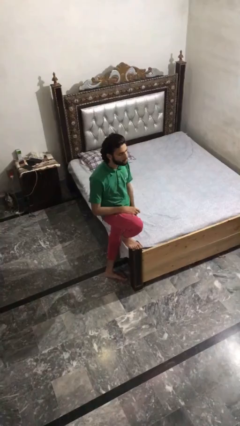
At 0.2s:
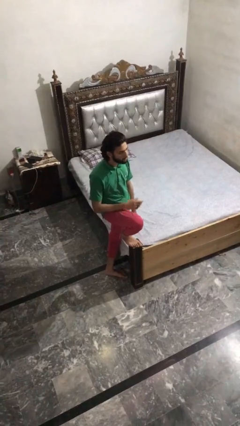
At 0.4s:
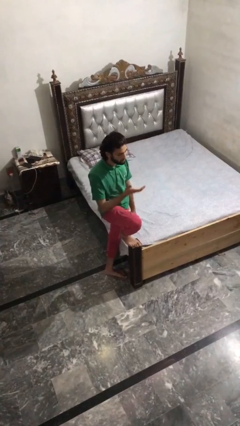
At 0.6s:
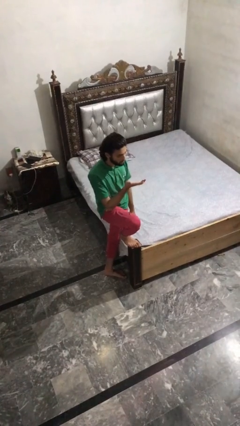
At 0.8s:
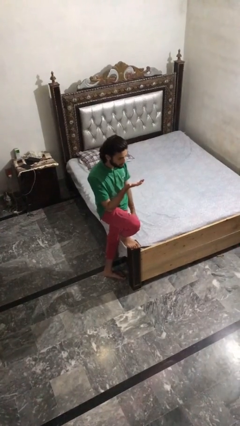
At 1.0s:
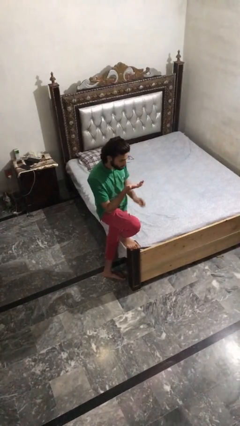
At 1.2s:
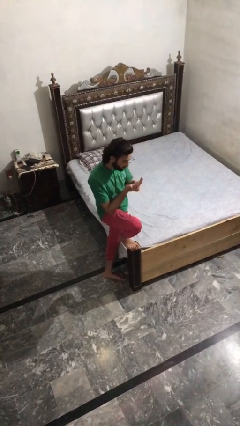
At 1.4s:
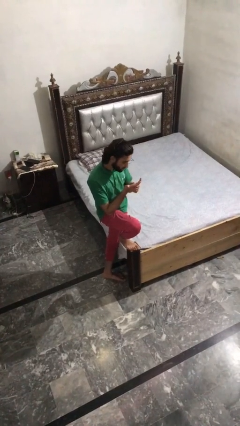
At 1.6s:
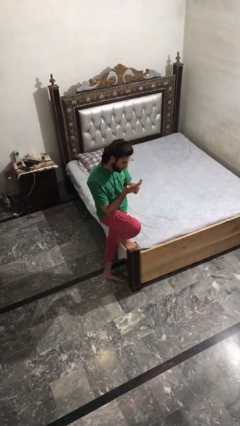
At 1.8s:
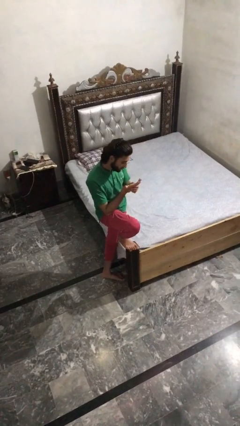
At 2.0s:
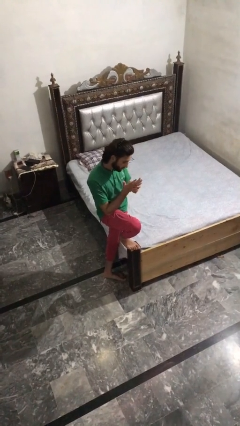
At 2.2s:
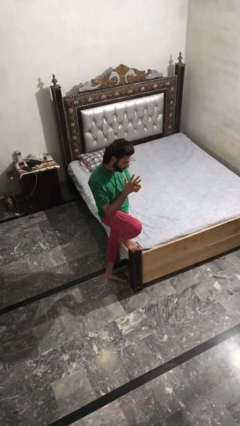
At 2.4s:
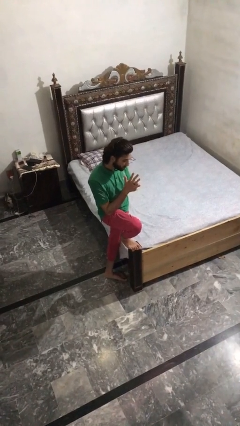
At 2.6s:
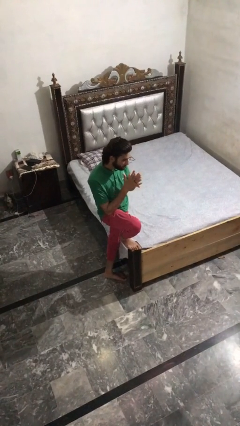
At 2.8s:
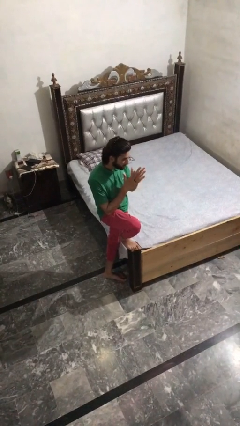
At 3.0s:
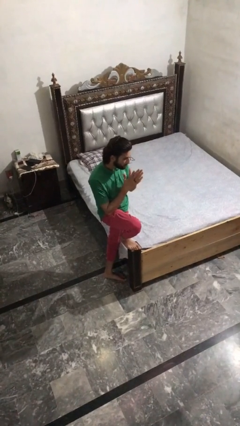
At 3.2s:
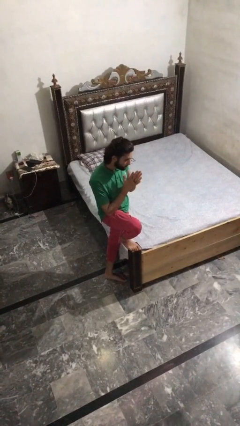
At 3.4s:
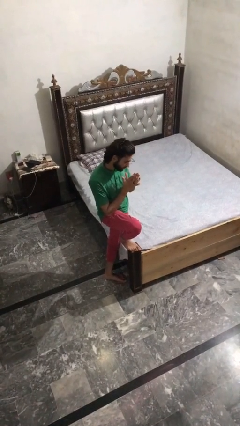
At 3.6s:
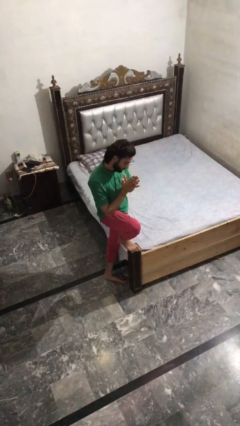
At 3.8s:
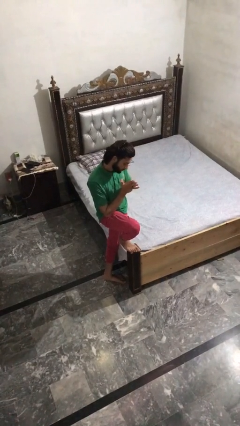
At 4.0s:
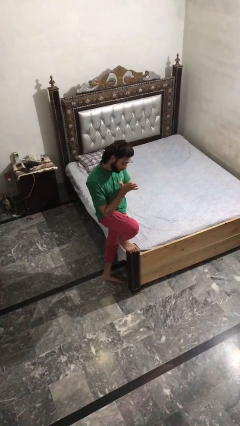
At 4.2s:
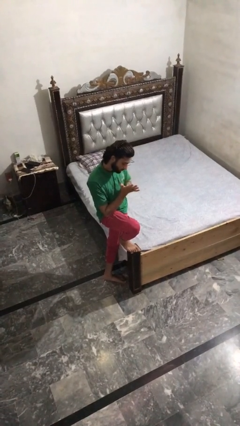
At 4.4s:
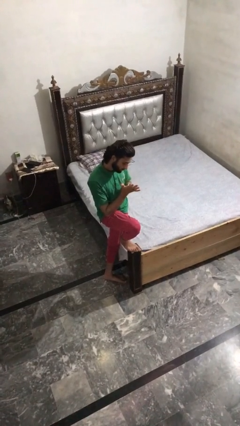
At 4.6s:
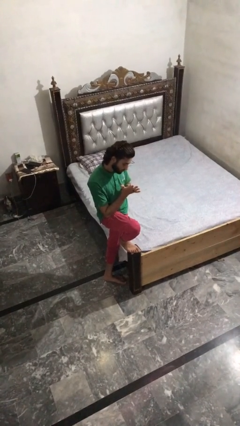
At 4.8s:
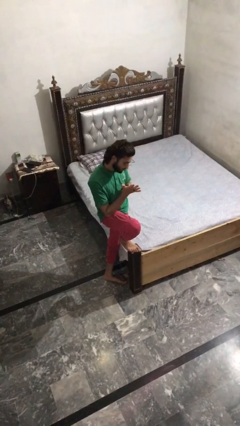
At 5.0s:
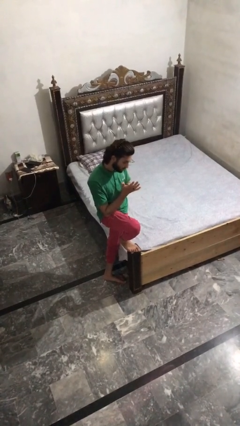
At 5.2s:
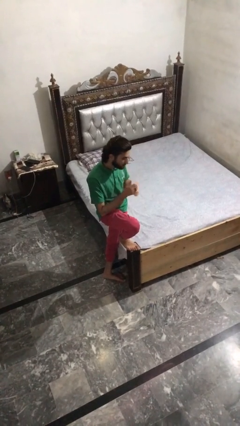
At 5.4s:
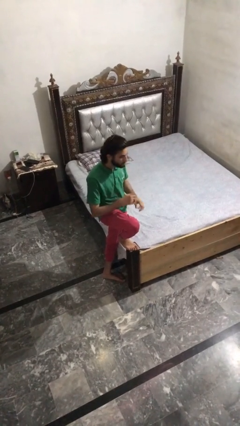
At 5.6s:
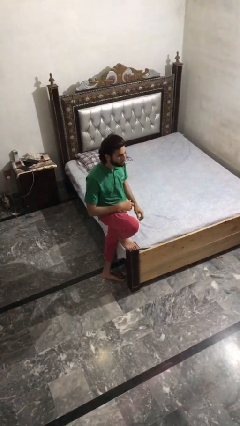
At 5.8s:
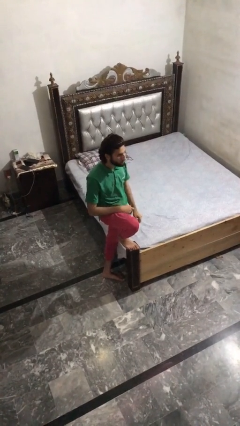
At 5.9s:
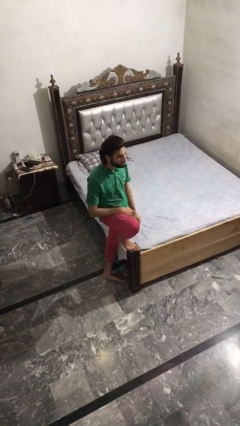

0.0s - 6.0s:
person looks at hands in lap

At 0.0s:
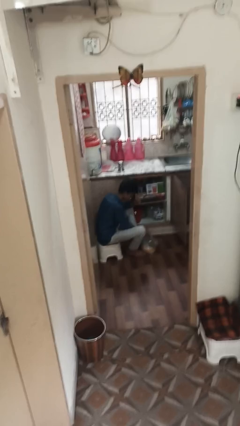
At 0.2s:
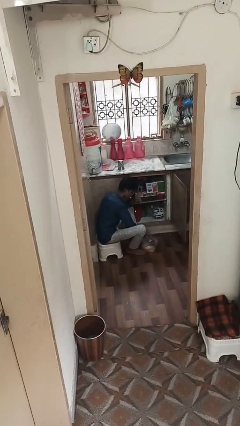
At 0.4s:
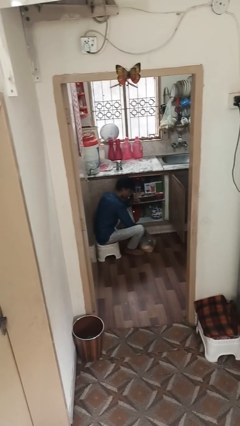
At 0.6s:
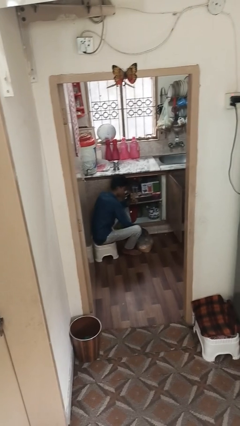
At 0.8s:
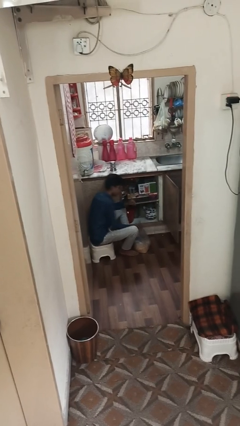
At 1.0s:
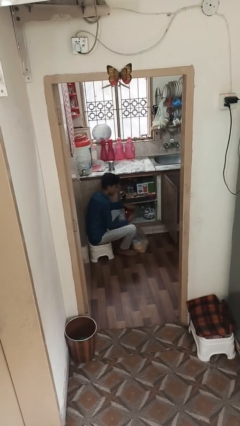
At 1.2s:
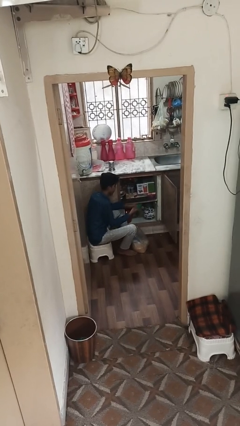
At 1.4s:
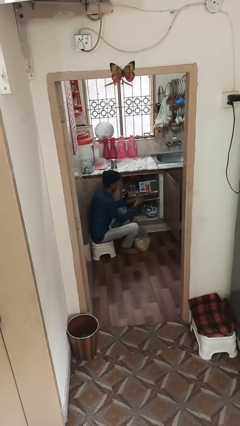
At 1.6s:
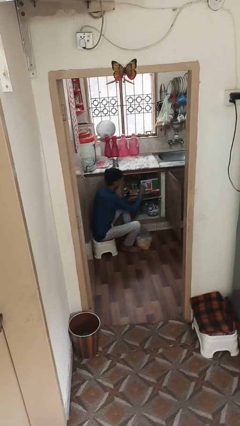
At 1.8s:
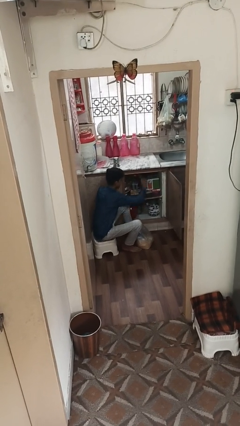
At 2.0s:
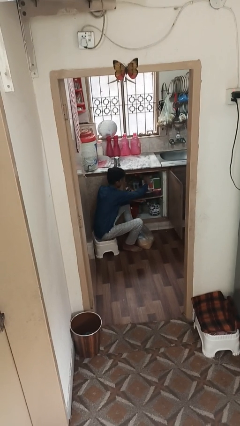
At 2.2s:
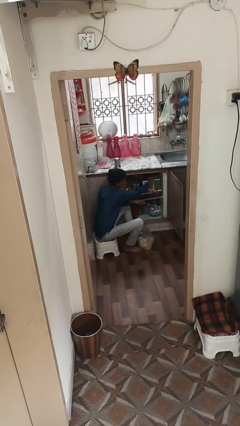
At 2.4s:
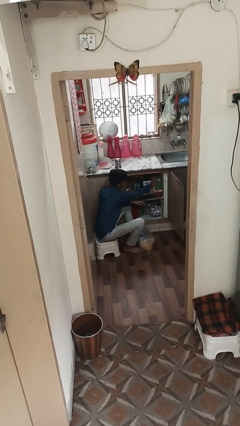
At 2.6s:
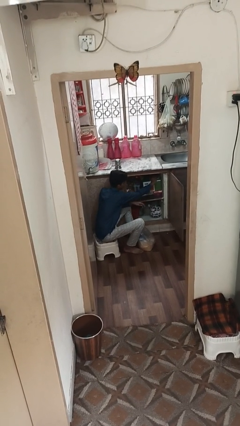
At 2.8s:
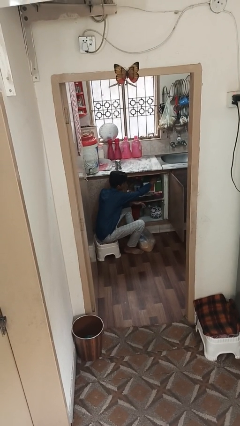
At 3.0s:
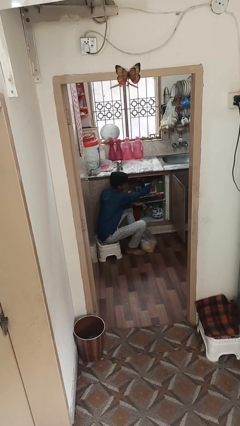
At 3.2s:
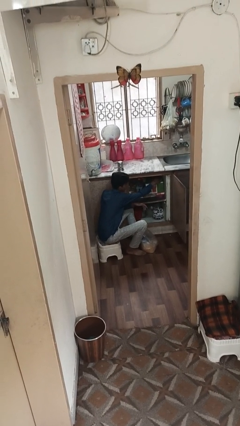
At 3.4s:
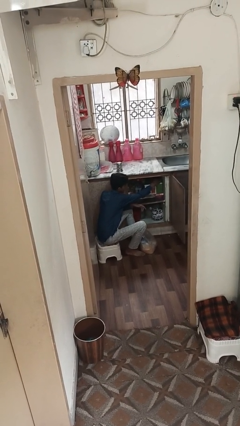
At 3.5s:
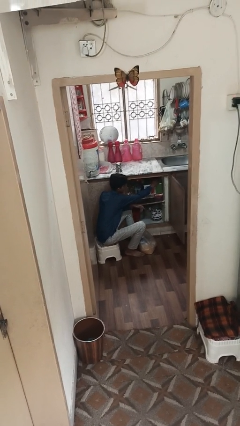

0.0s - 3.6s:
person loads groceries into cabinet

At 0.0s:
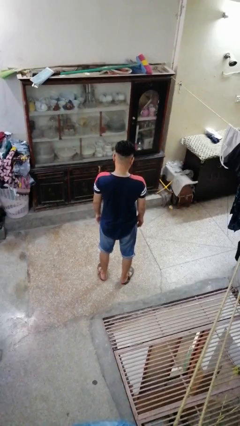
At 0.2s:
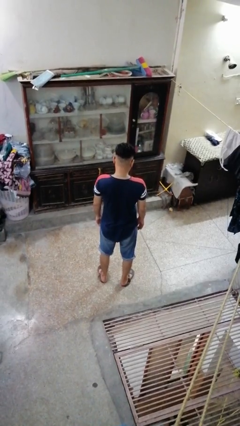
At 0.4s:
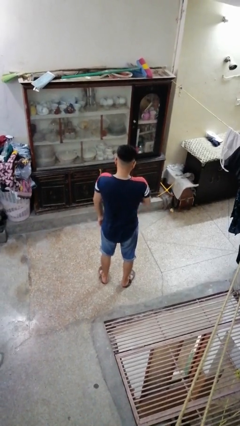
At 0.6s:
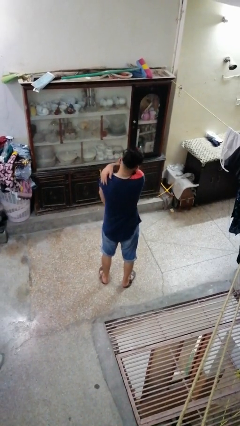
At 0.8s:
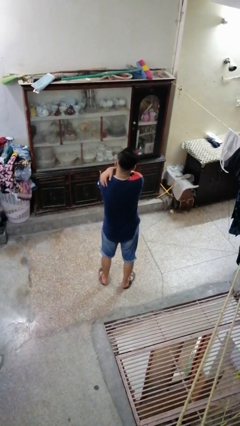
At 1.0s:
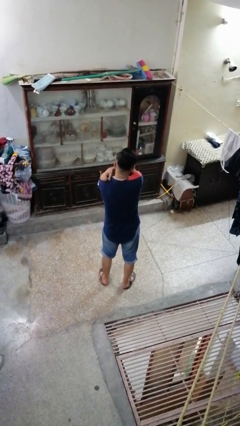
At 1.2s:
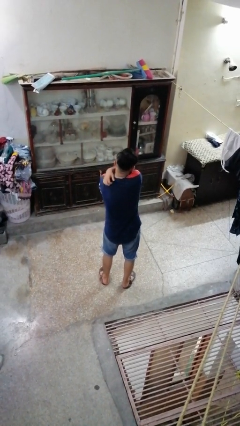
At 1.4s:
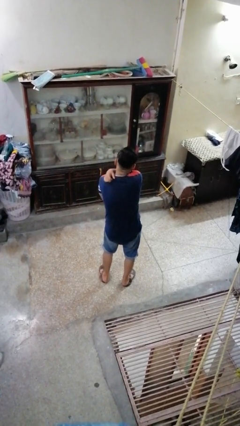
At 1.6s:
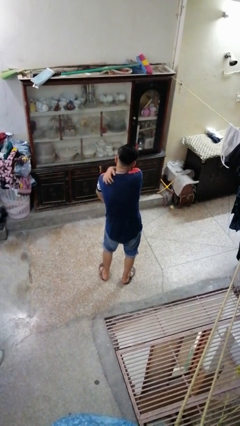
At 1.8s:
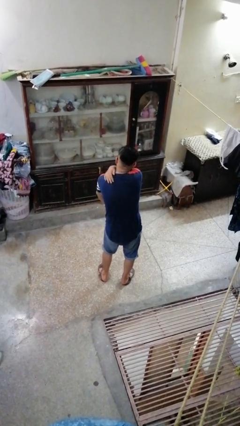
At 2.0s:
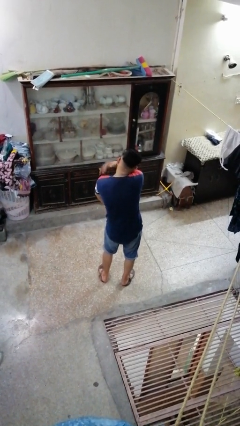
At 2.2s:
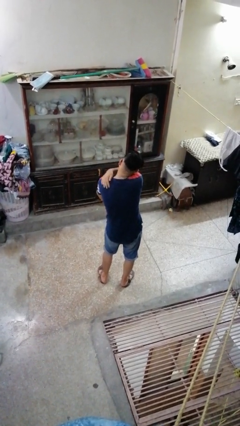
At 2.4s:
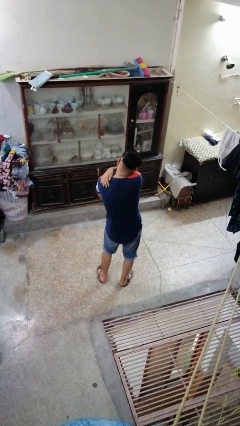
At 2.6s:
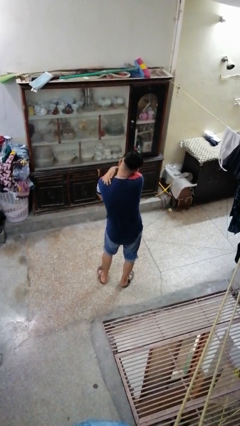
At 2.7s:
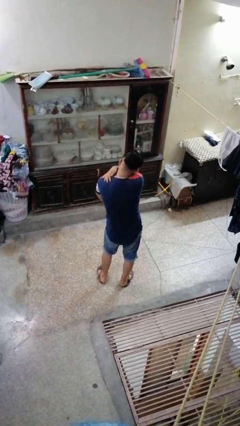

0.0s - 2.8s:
person swats bug

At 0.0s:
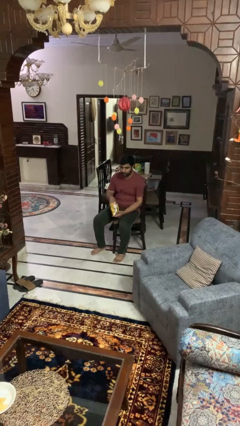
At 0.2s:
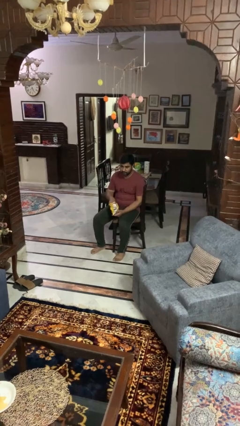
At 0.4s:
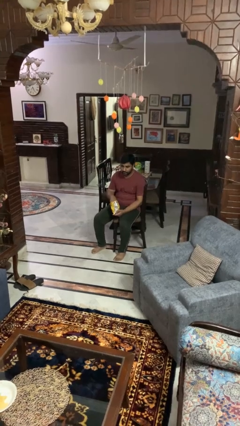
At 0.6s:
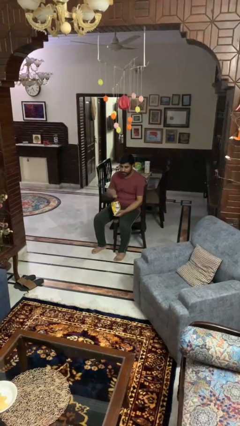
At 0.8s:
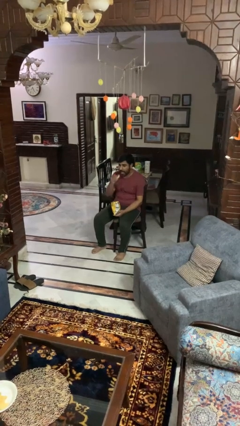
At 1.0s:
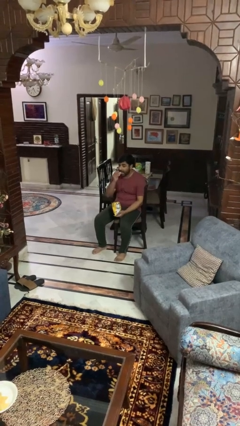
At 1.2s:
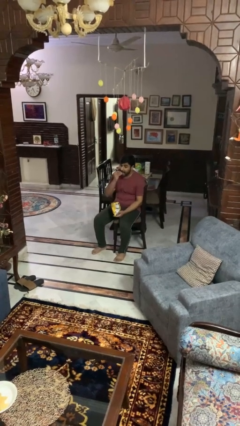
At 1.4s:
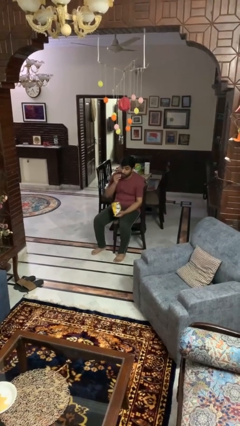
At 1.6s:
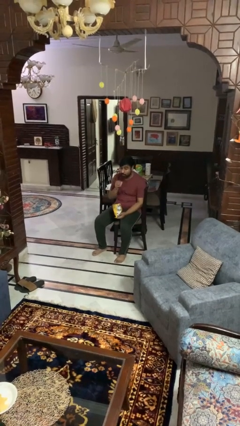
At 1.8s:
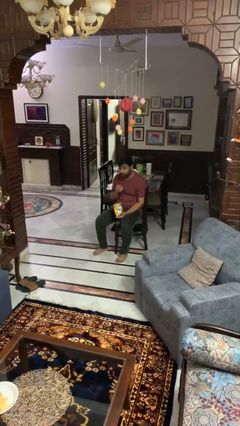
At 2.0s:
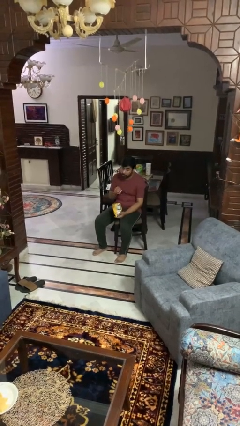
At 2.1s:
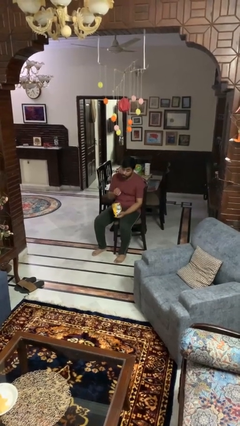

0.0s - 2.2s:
person eats snack from bag

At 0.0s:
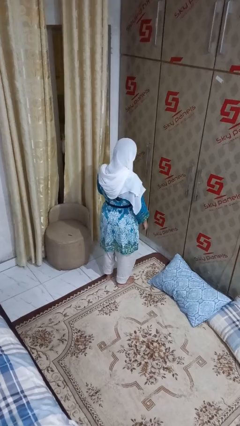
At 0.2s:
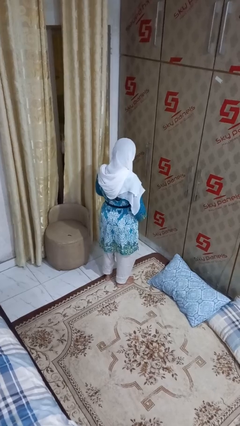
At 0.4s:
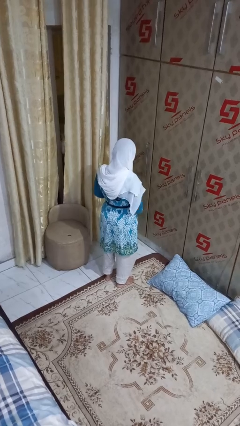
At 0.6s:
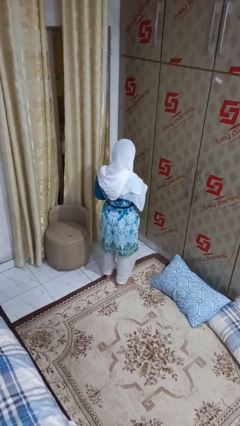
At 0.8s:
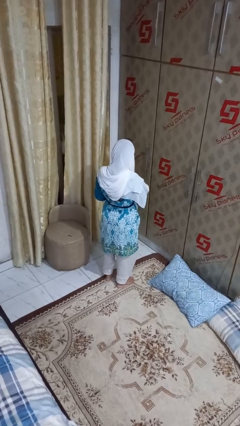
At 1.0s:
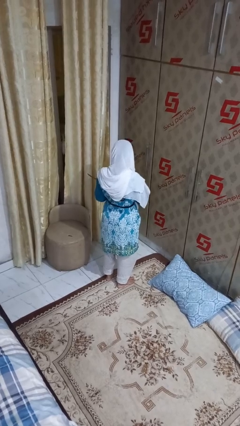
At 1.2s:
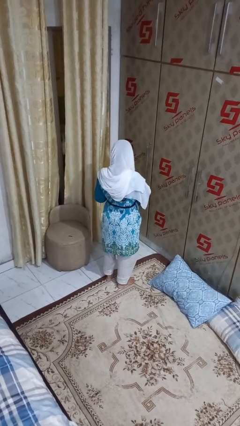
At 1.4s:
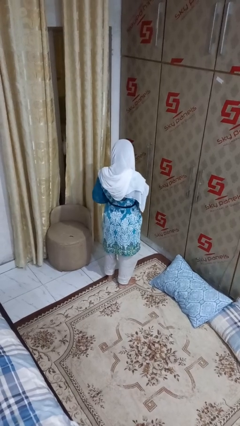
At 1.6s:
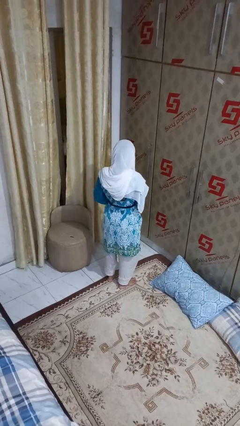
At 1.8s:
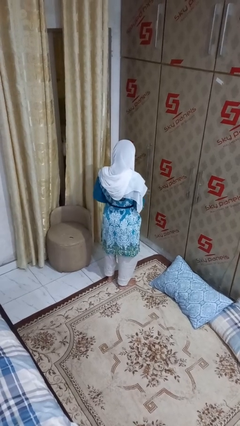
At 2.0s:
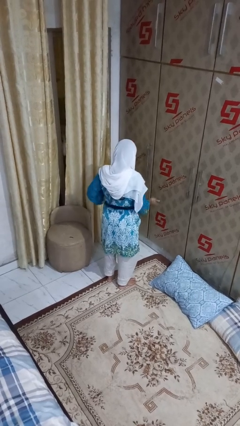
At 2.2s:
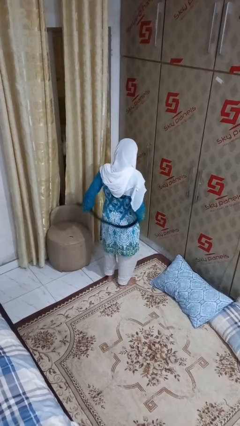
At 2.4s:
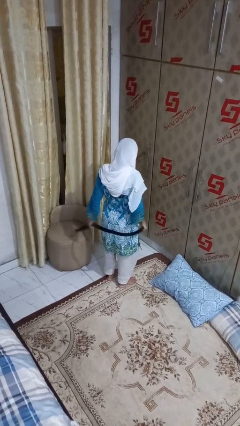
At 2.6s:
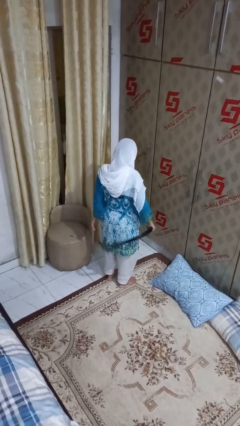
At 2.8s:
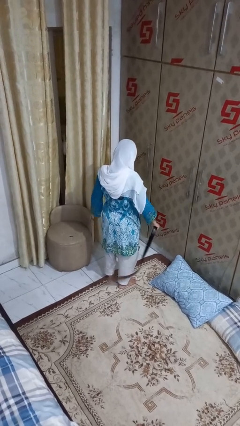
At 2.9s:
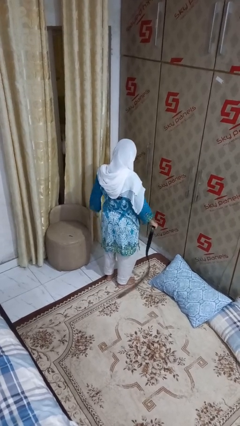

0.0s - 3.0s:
person takes off belt
